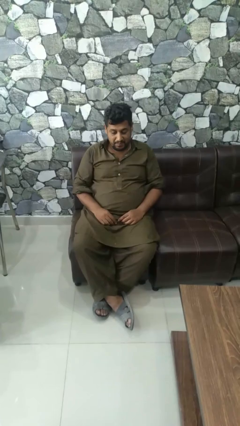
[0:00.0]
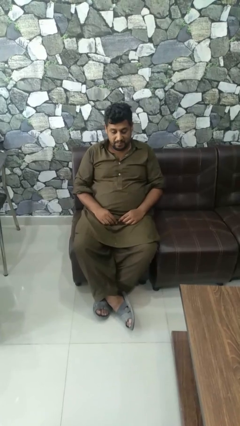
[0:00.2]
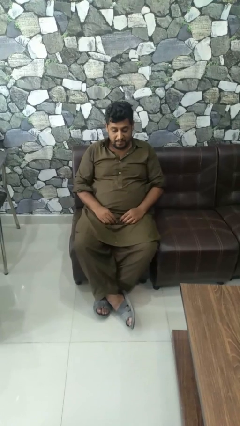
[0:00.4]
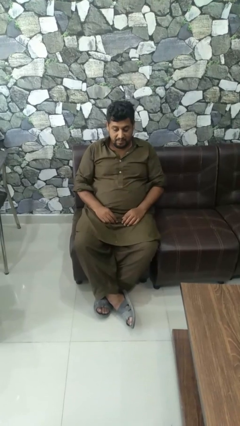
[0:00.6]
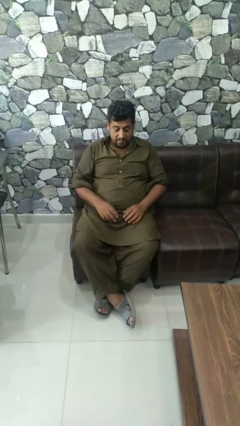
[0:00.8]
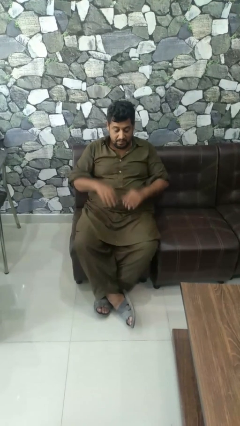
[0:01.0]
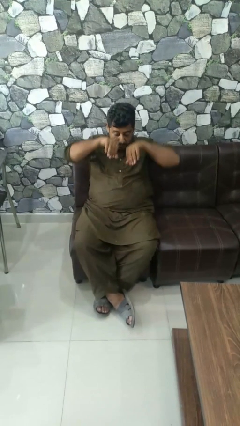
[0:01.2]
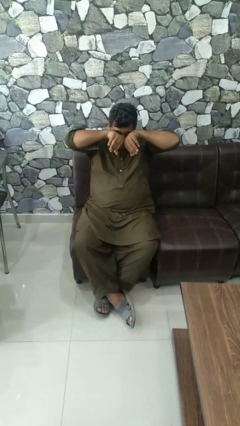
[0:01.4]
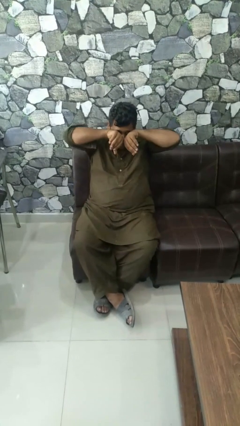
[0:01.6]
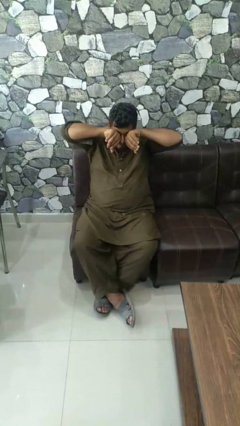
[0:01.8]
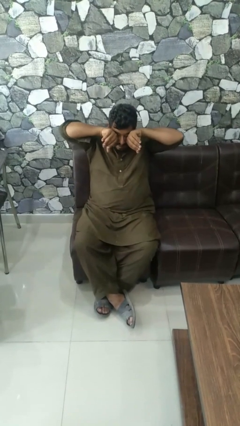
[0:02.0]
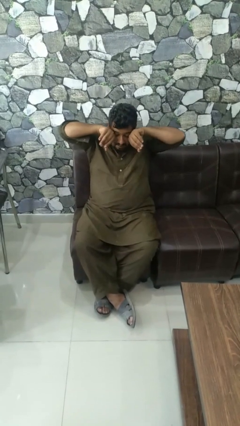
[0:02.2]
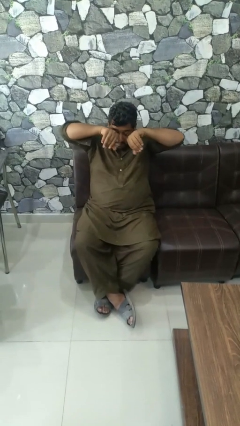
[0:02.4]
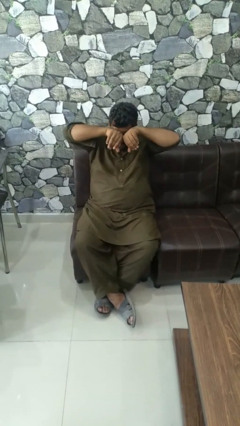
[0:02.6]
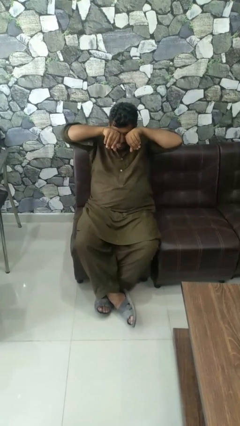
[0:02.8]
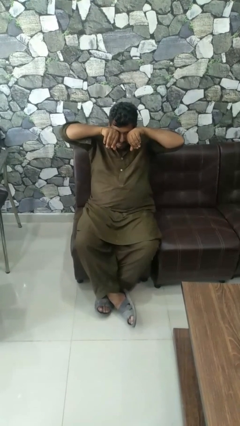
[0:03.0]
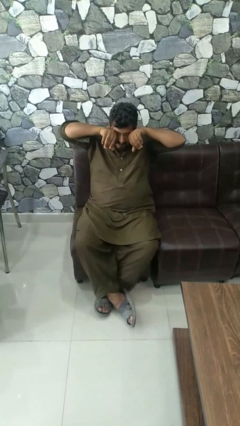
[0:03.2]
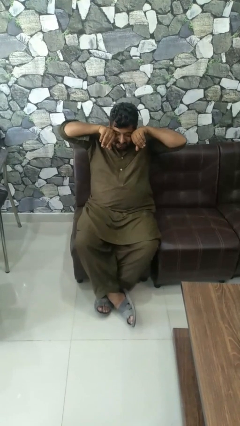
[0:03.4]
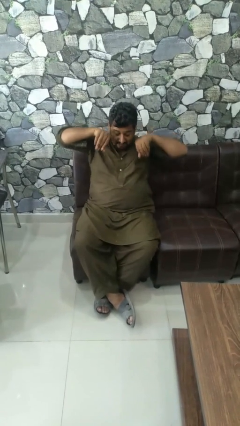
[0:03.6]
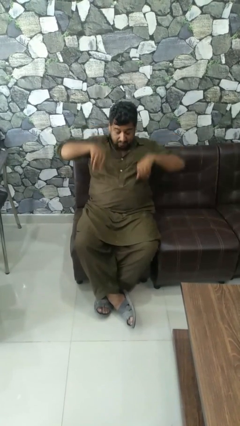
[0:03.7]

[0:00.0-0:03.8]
person rubs eyes

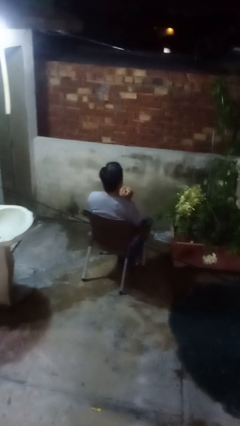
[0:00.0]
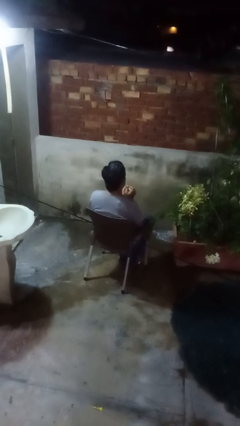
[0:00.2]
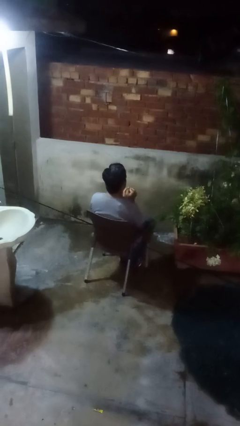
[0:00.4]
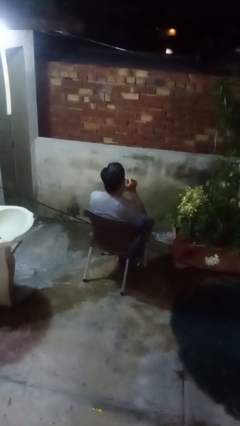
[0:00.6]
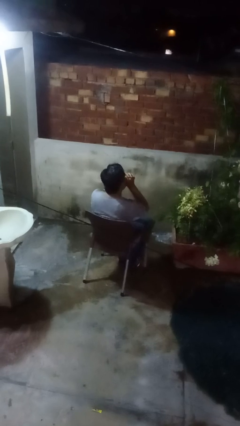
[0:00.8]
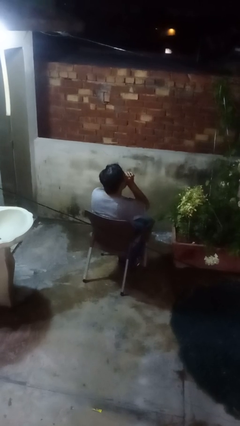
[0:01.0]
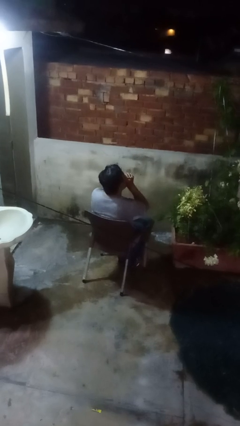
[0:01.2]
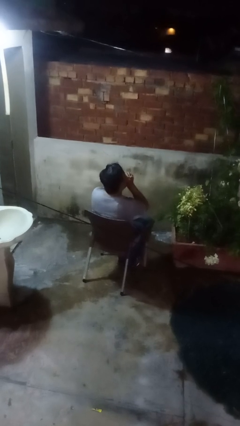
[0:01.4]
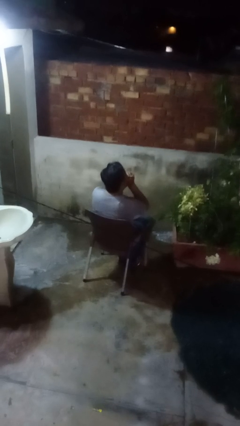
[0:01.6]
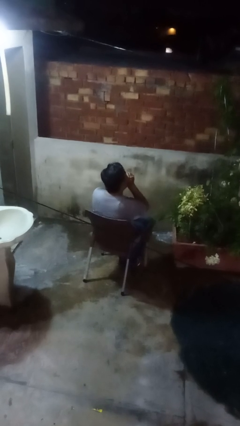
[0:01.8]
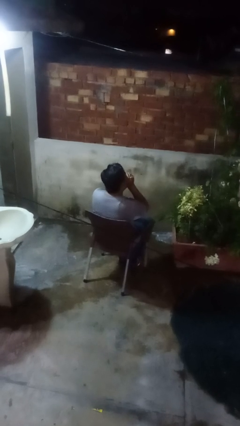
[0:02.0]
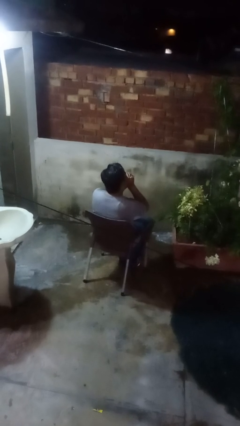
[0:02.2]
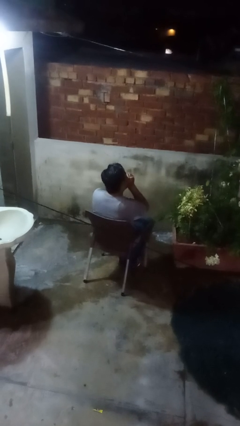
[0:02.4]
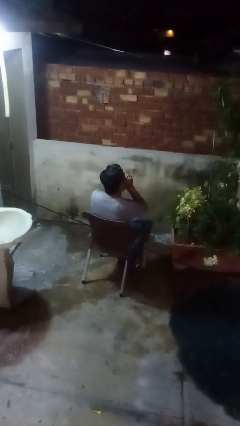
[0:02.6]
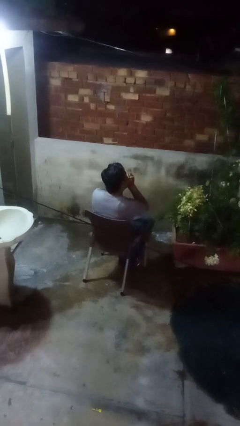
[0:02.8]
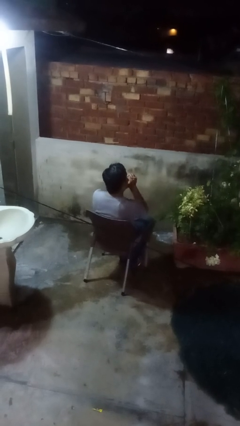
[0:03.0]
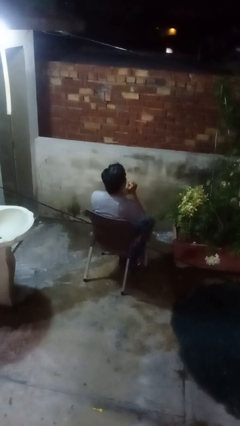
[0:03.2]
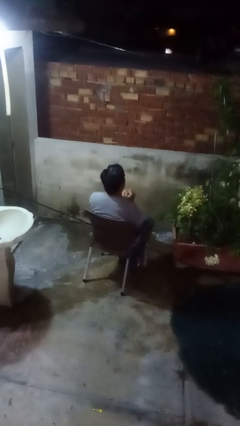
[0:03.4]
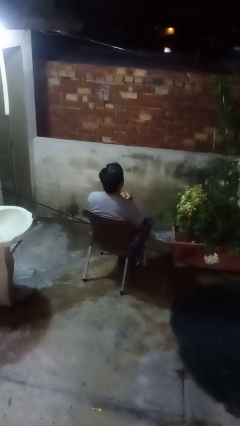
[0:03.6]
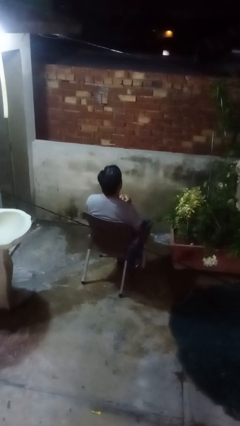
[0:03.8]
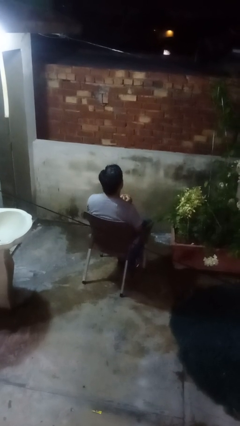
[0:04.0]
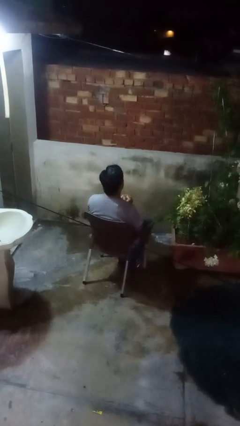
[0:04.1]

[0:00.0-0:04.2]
person blows into hands

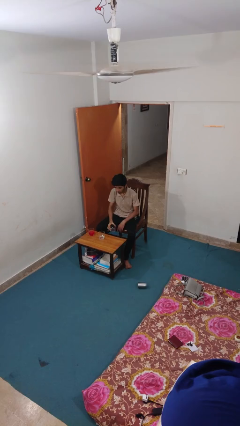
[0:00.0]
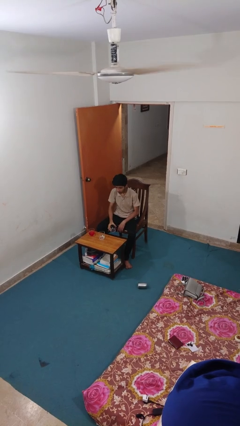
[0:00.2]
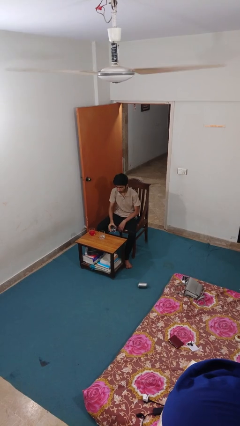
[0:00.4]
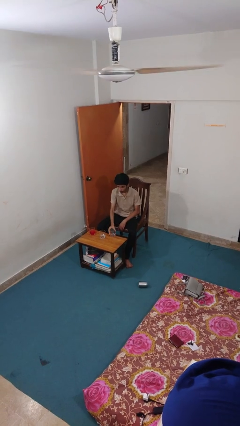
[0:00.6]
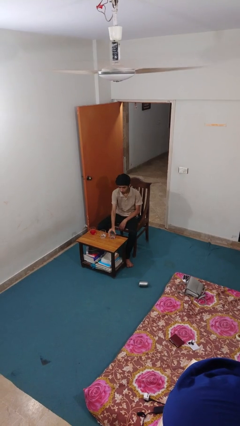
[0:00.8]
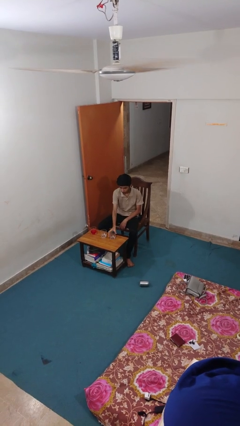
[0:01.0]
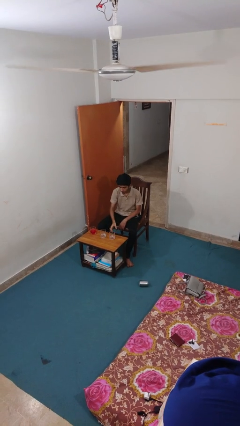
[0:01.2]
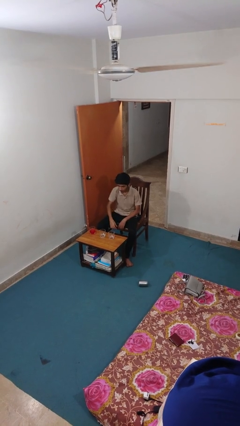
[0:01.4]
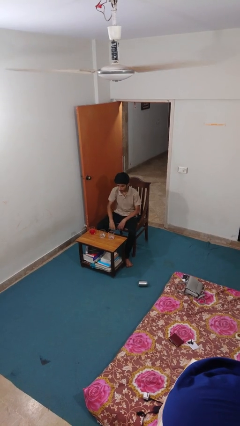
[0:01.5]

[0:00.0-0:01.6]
person puts down object on table

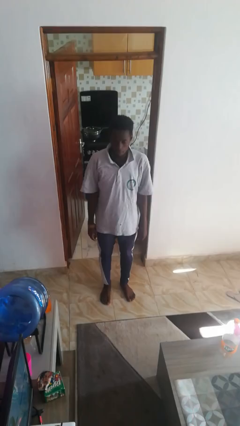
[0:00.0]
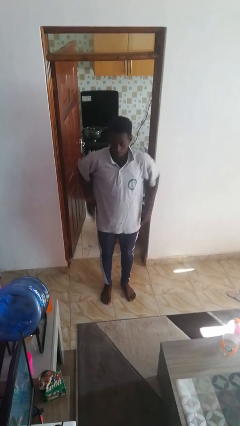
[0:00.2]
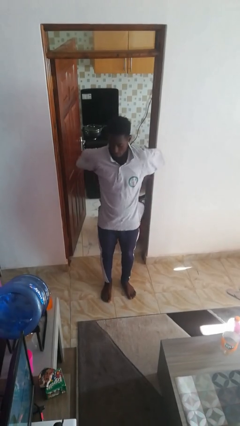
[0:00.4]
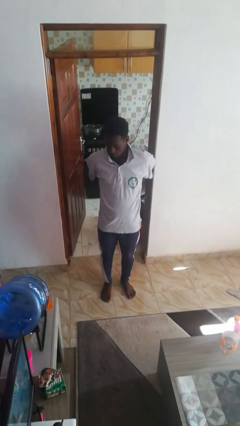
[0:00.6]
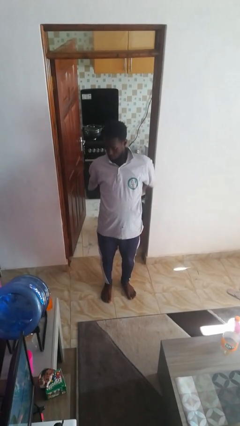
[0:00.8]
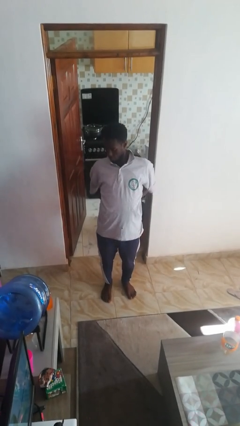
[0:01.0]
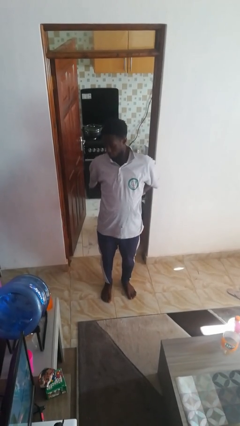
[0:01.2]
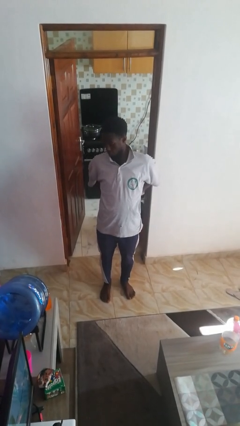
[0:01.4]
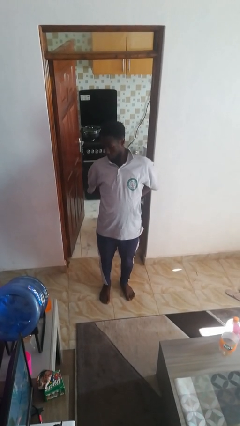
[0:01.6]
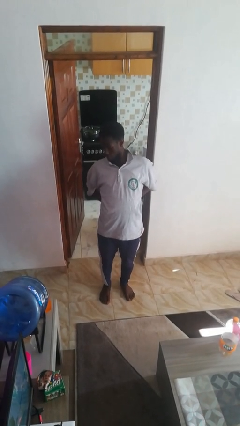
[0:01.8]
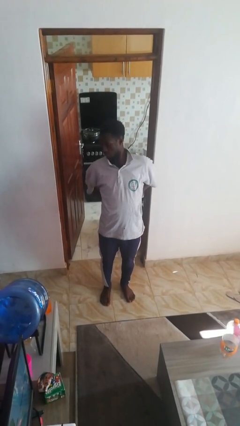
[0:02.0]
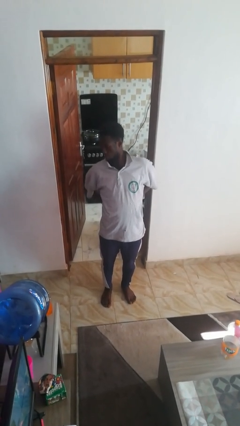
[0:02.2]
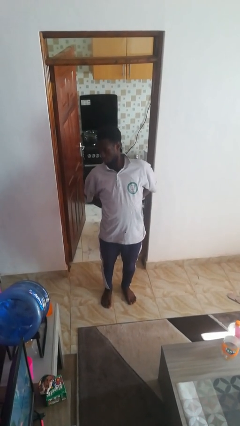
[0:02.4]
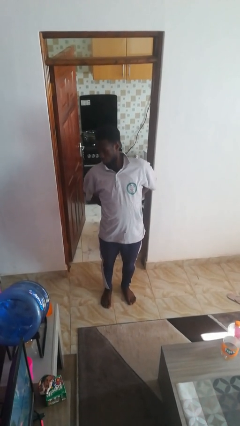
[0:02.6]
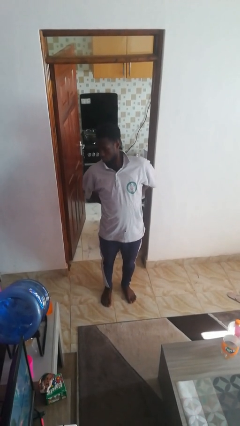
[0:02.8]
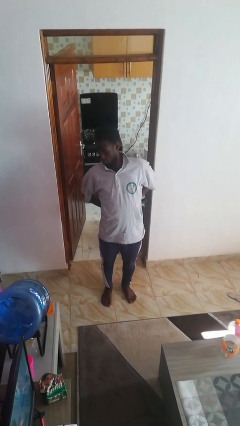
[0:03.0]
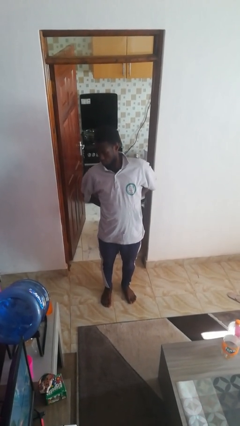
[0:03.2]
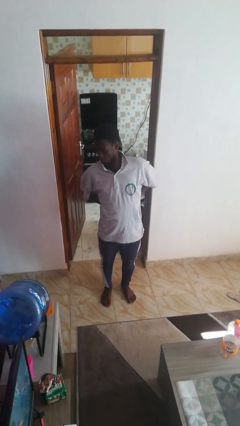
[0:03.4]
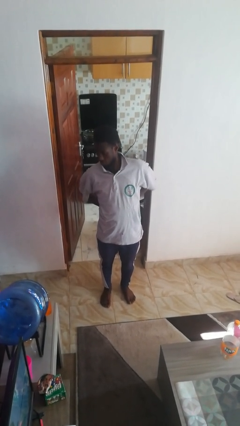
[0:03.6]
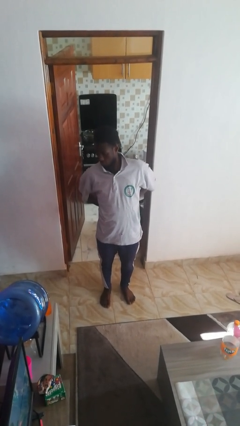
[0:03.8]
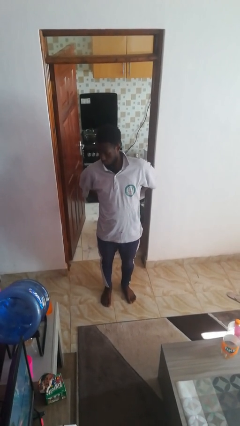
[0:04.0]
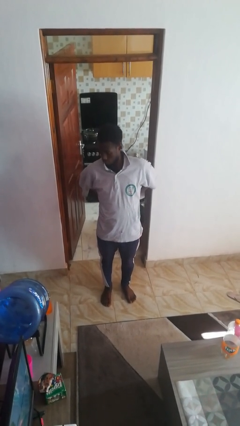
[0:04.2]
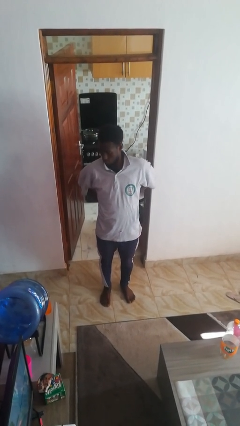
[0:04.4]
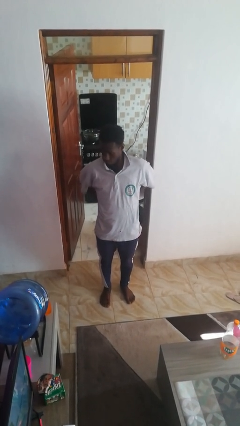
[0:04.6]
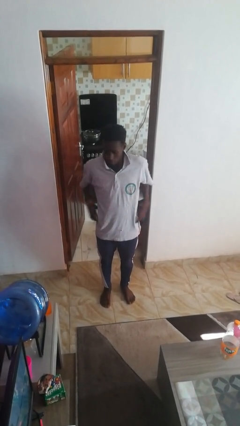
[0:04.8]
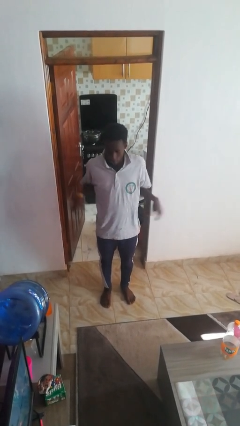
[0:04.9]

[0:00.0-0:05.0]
person stretches back

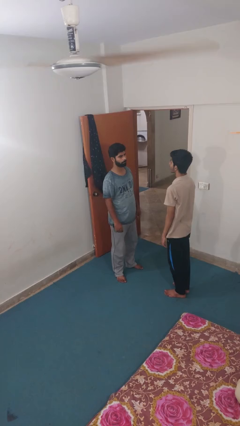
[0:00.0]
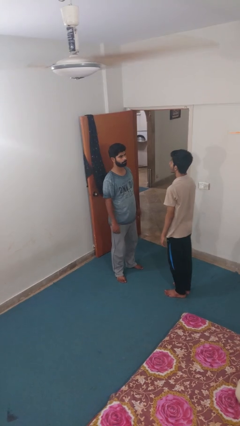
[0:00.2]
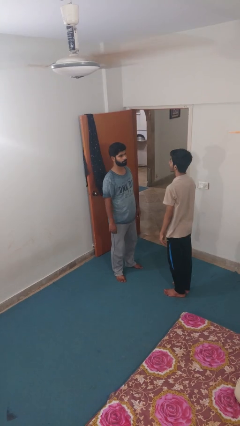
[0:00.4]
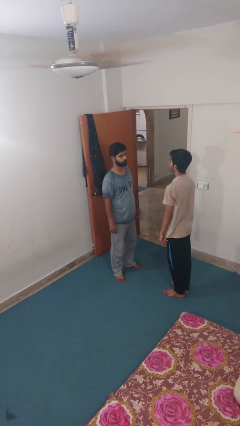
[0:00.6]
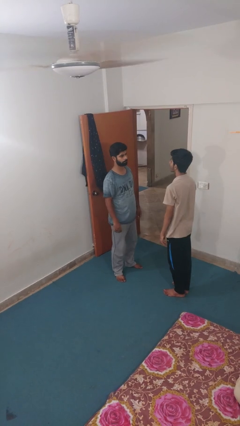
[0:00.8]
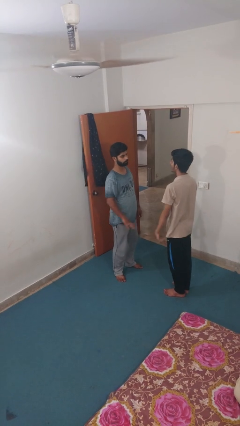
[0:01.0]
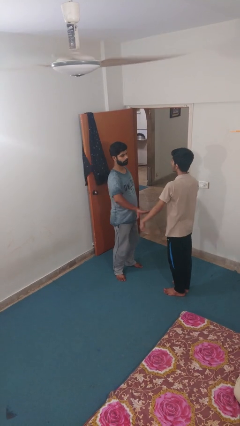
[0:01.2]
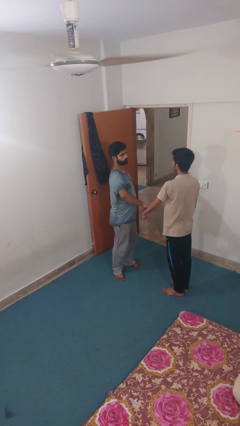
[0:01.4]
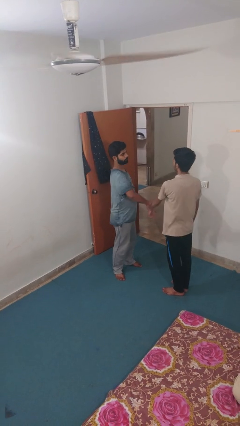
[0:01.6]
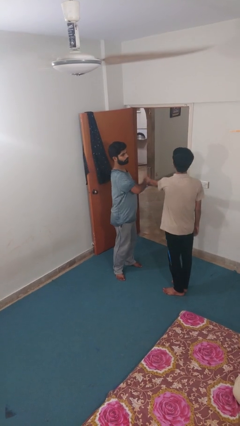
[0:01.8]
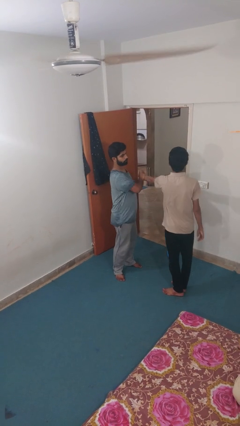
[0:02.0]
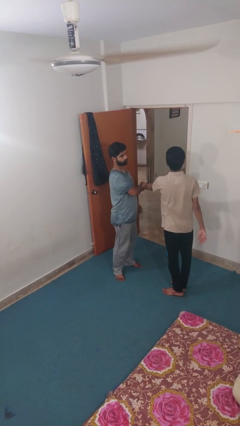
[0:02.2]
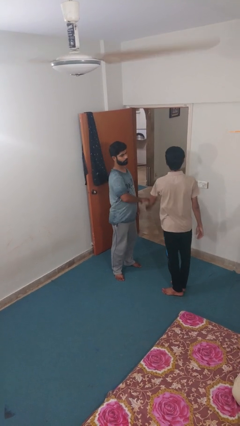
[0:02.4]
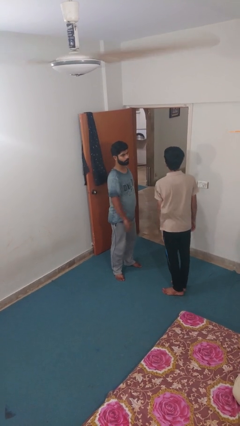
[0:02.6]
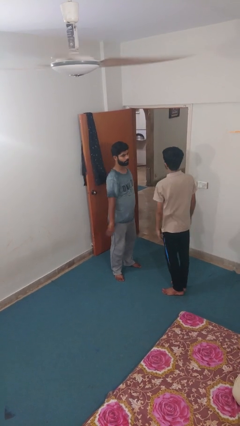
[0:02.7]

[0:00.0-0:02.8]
person grabs person by forearm
